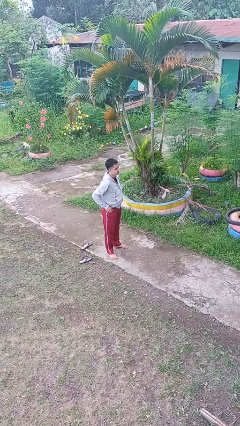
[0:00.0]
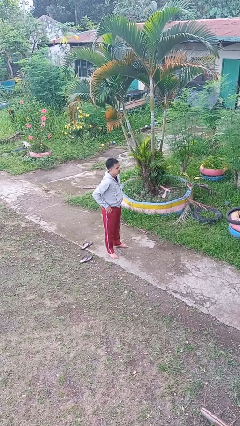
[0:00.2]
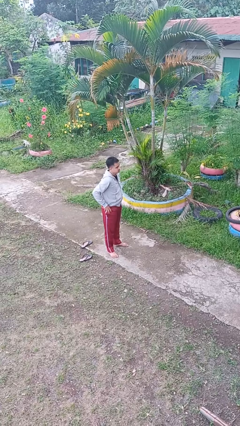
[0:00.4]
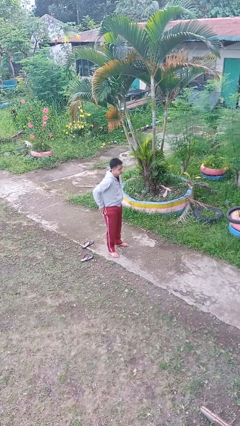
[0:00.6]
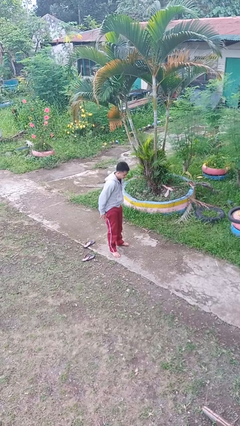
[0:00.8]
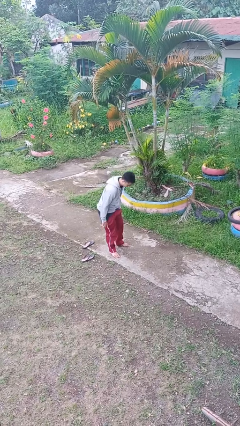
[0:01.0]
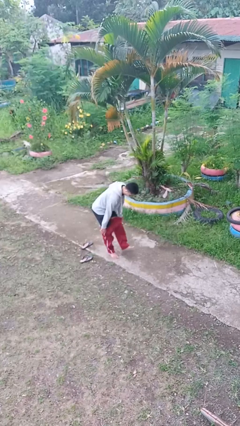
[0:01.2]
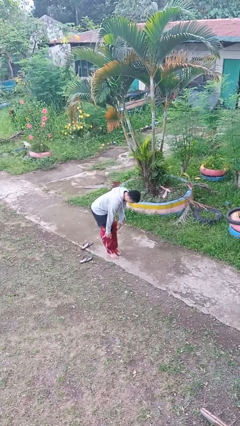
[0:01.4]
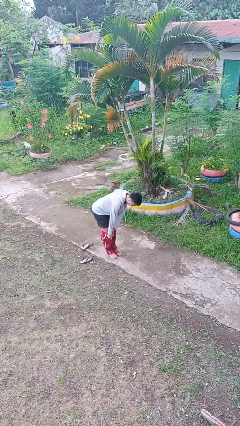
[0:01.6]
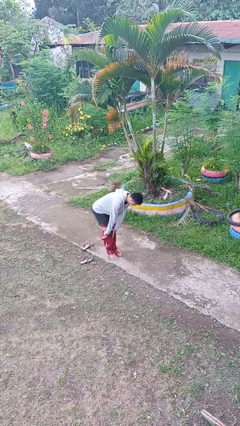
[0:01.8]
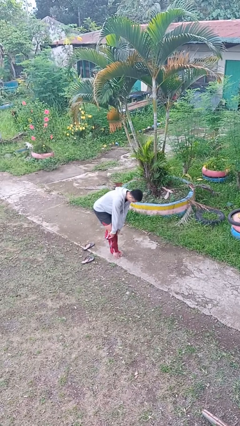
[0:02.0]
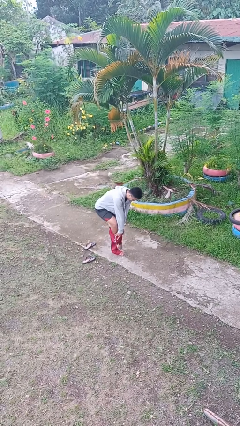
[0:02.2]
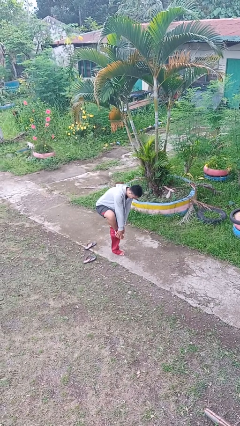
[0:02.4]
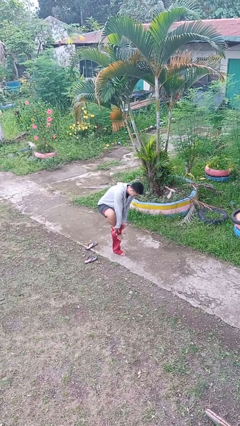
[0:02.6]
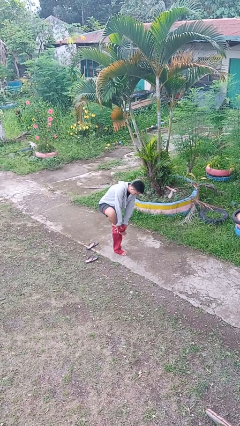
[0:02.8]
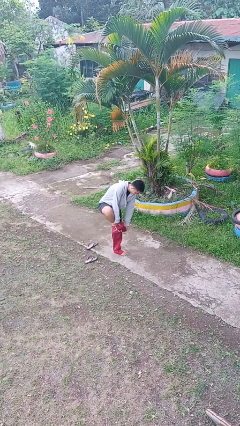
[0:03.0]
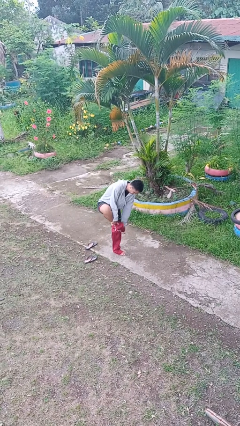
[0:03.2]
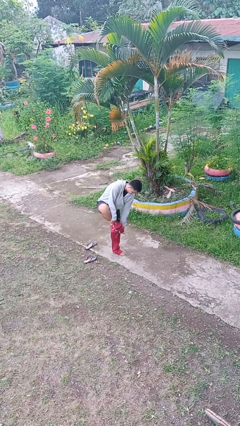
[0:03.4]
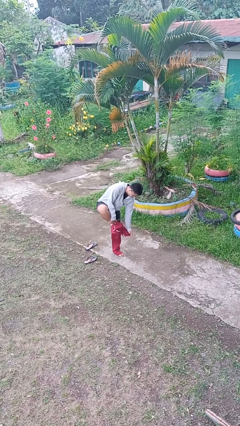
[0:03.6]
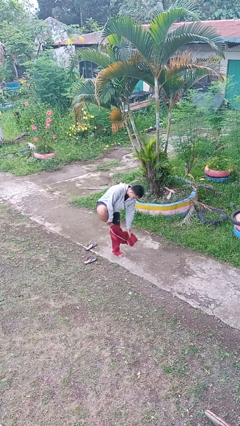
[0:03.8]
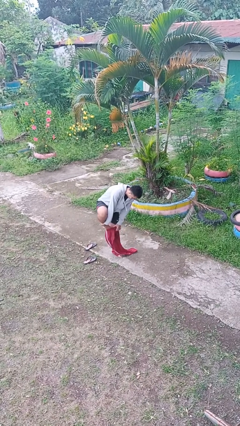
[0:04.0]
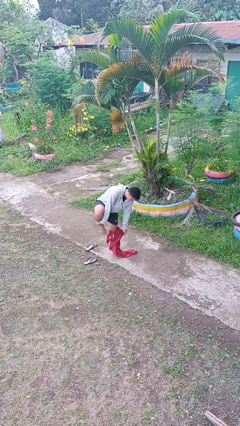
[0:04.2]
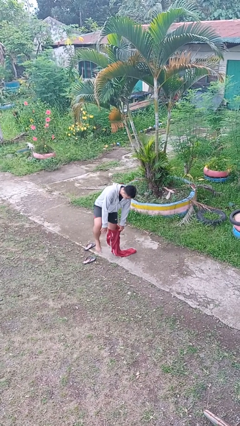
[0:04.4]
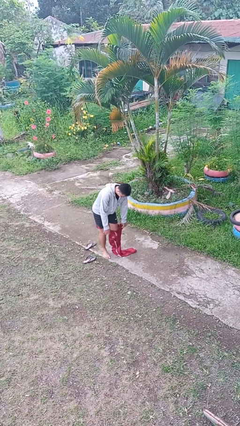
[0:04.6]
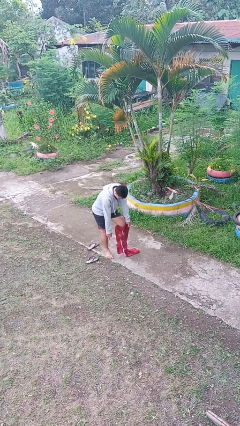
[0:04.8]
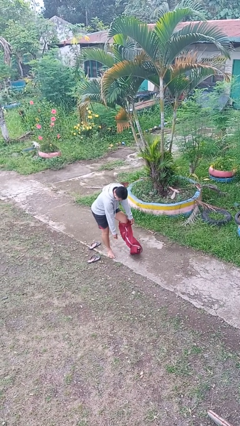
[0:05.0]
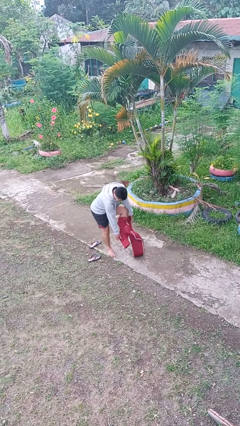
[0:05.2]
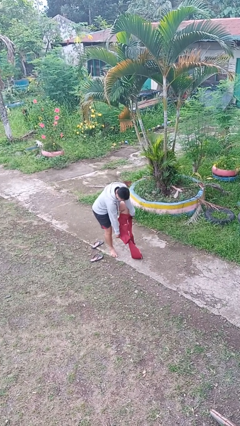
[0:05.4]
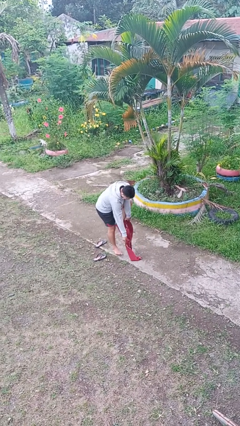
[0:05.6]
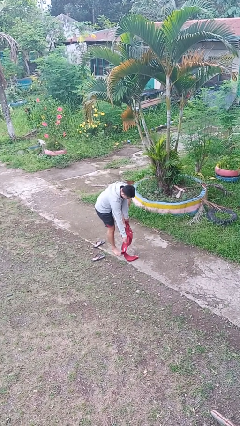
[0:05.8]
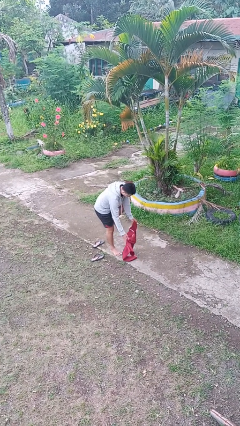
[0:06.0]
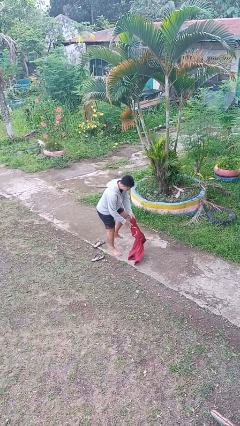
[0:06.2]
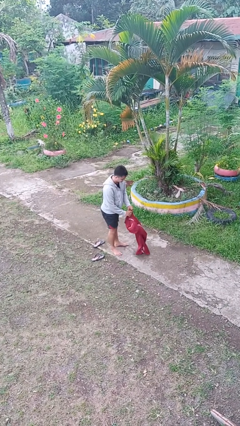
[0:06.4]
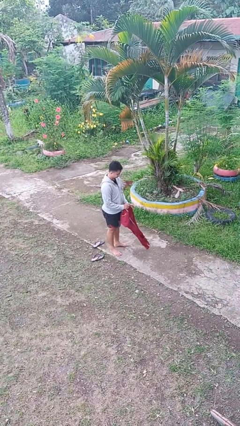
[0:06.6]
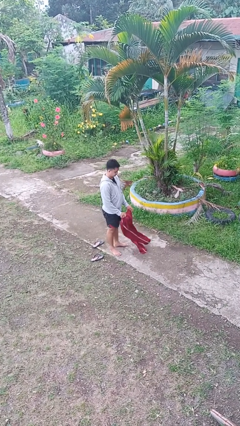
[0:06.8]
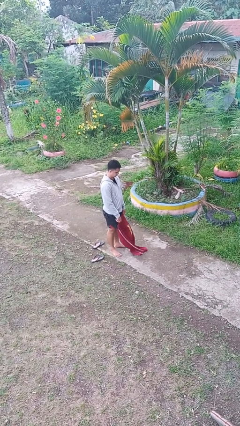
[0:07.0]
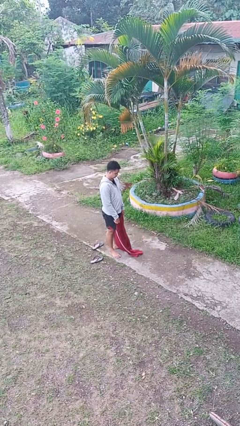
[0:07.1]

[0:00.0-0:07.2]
person puts on pants

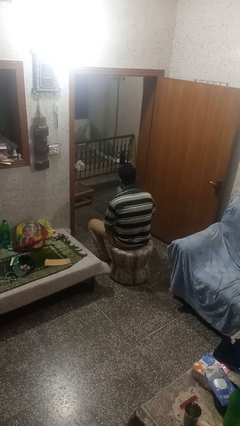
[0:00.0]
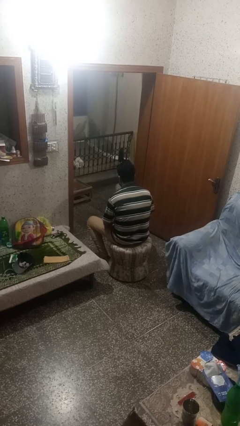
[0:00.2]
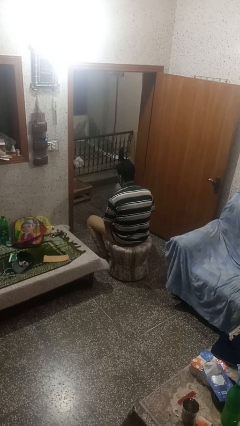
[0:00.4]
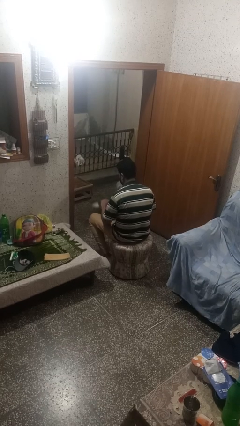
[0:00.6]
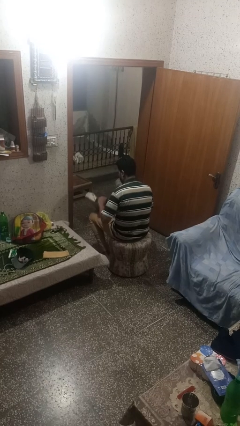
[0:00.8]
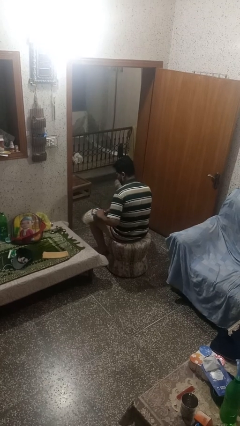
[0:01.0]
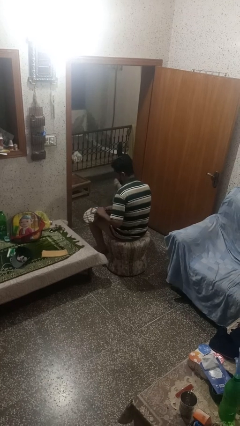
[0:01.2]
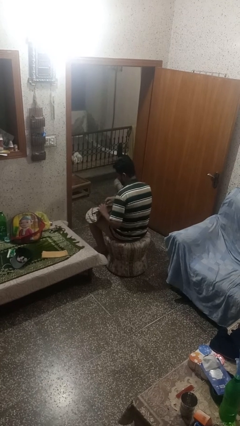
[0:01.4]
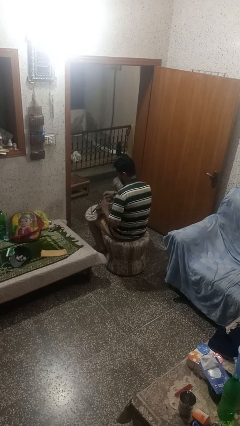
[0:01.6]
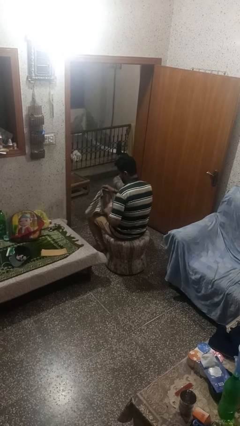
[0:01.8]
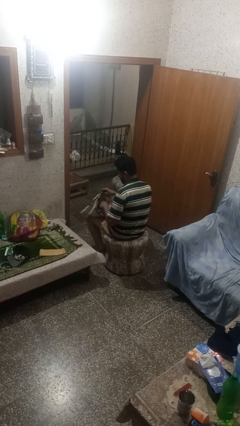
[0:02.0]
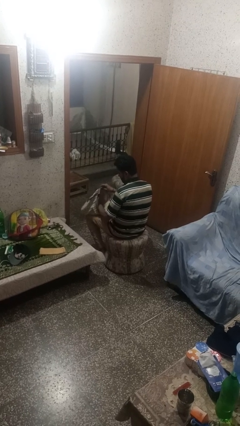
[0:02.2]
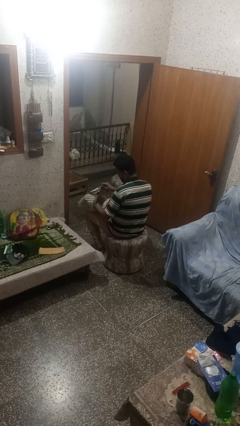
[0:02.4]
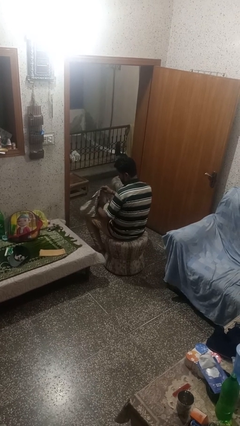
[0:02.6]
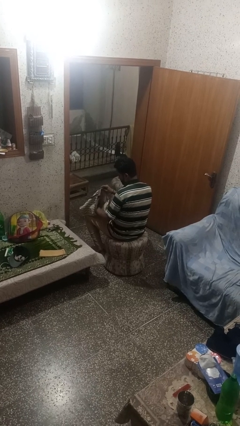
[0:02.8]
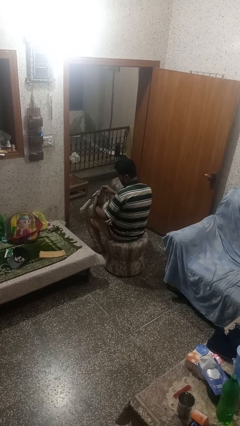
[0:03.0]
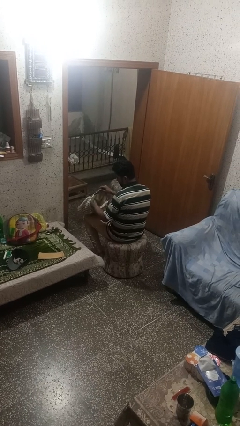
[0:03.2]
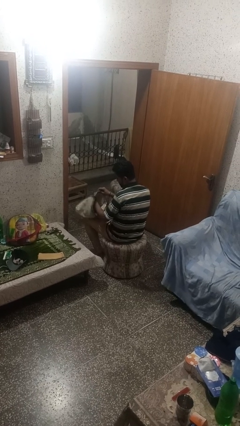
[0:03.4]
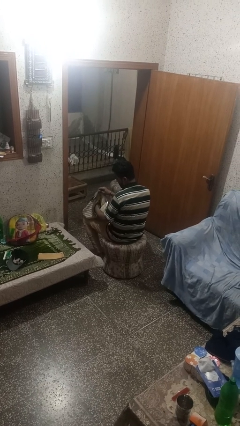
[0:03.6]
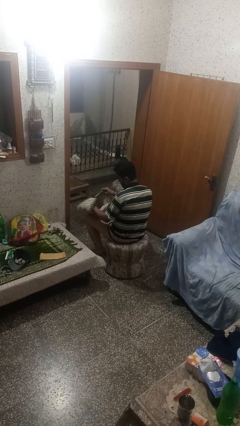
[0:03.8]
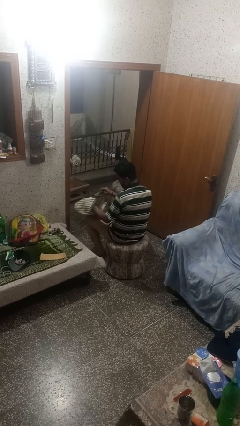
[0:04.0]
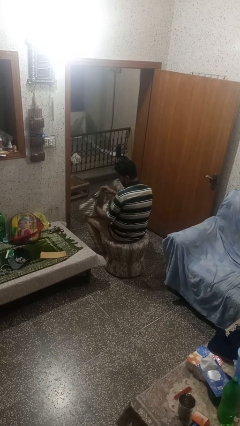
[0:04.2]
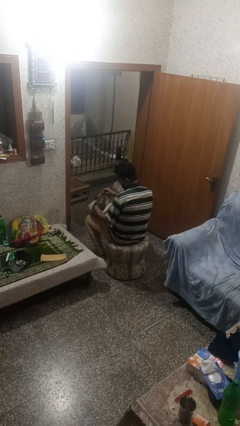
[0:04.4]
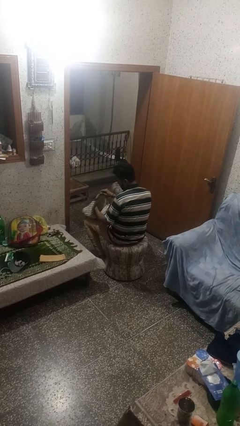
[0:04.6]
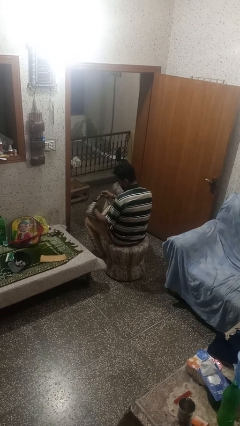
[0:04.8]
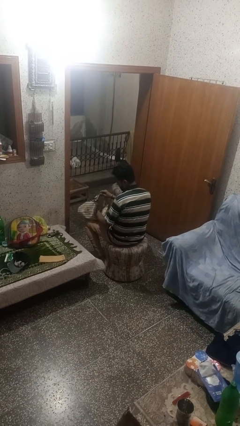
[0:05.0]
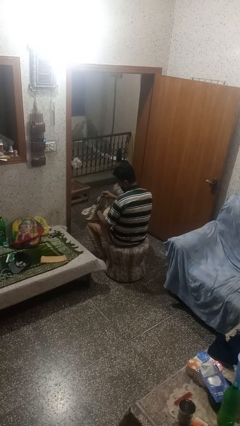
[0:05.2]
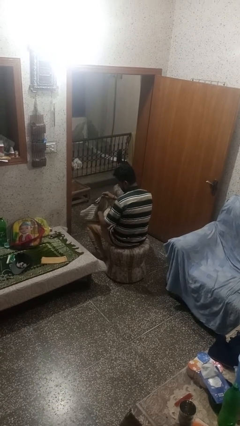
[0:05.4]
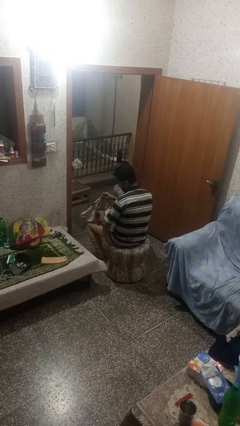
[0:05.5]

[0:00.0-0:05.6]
person searches in purse

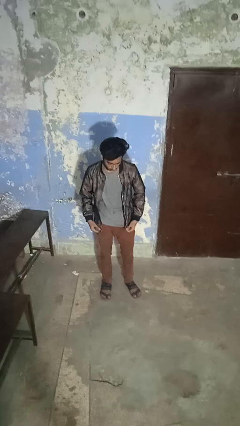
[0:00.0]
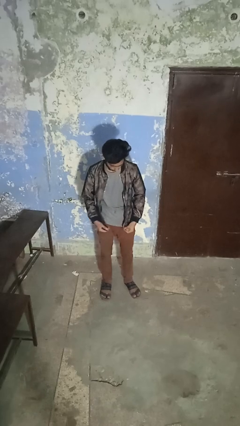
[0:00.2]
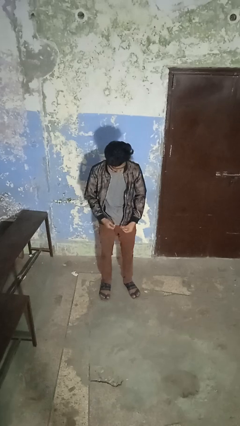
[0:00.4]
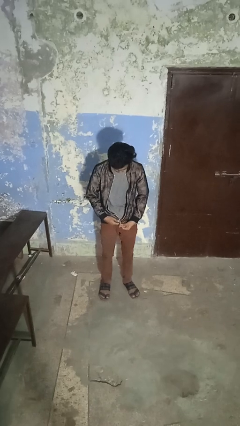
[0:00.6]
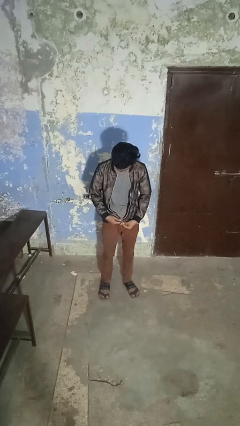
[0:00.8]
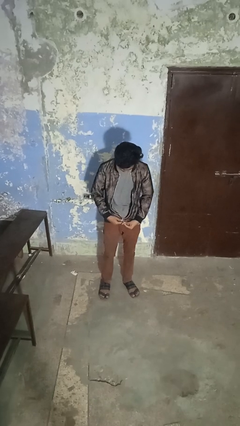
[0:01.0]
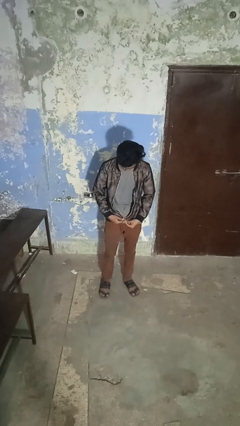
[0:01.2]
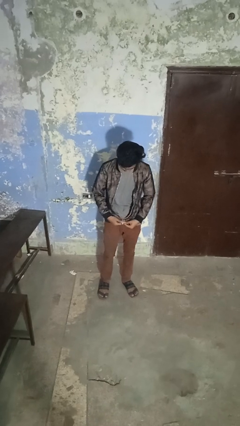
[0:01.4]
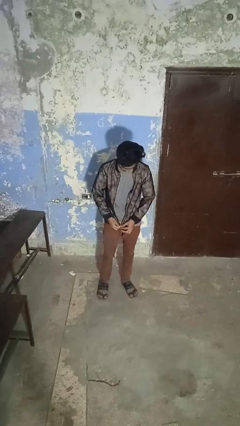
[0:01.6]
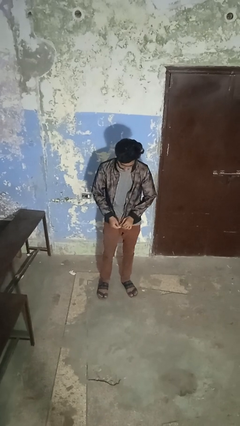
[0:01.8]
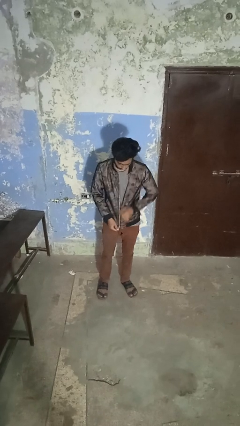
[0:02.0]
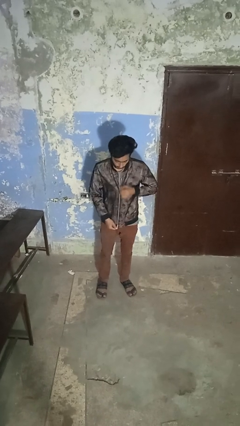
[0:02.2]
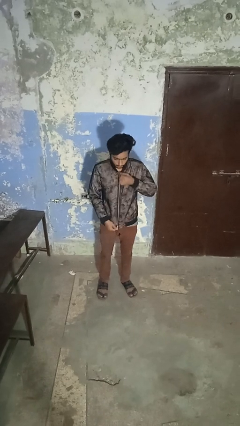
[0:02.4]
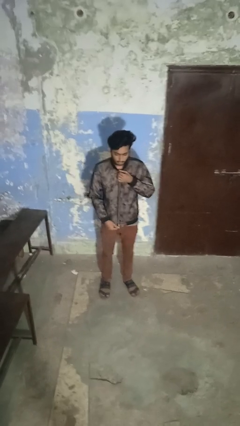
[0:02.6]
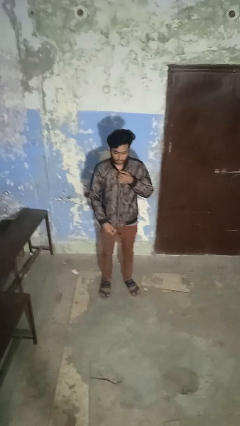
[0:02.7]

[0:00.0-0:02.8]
person zips up jacket

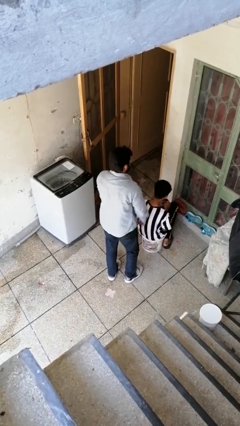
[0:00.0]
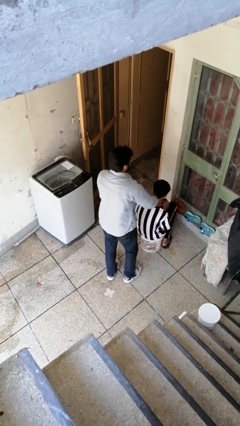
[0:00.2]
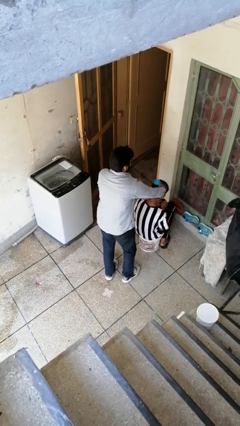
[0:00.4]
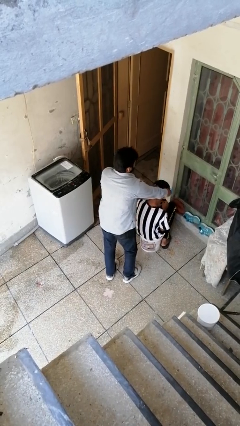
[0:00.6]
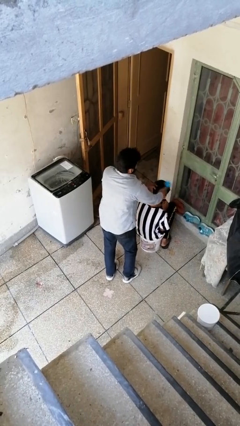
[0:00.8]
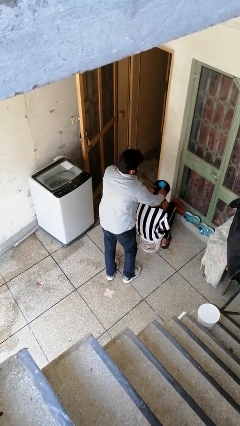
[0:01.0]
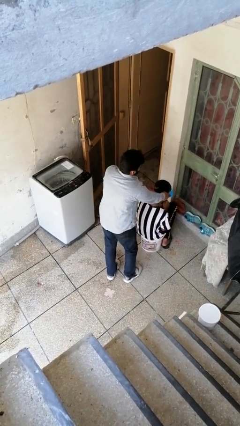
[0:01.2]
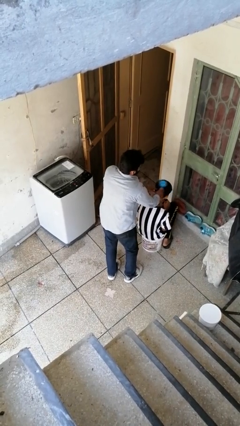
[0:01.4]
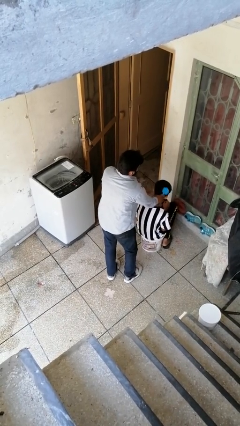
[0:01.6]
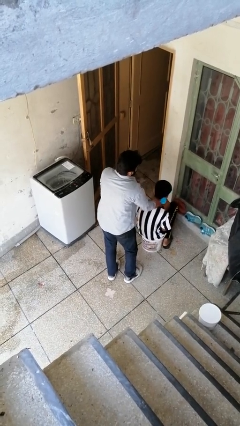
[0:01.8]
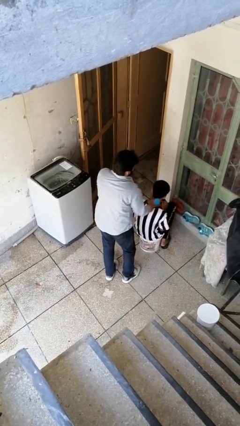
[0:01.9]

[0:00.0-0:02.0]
person brushes hair of person
